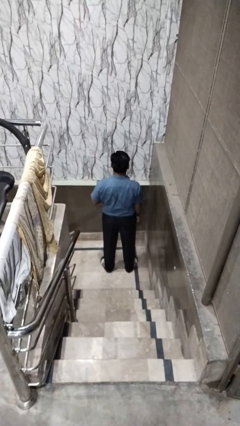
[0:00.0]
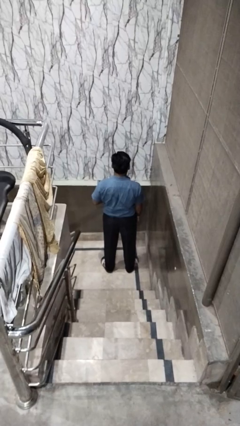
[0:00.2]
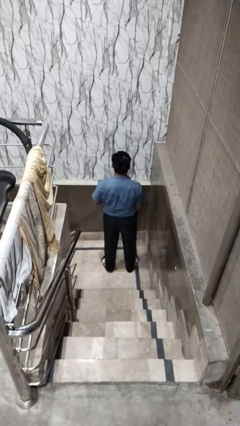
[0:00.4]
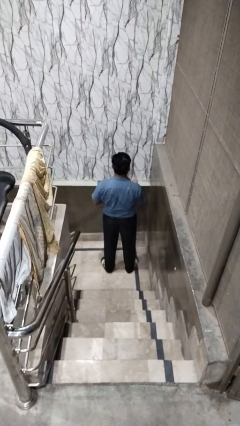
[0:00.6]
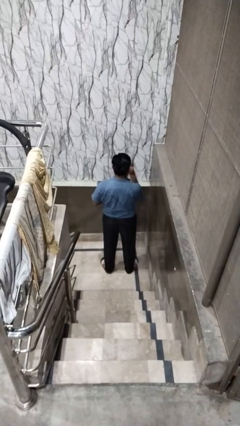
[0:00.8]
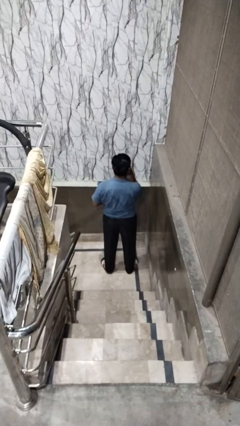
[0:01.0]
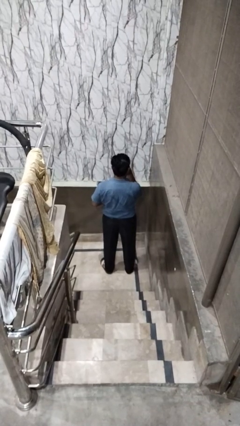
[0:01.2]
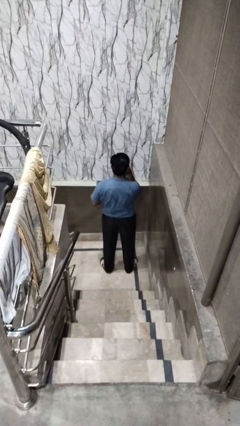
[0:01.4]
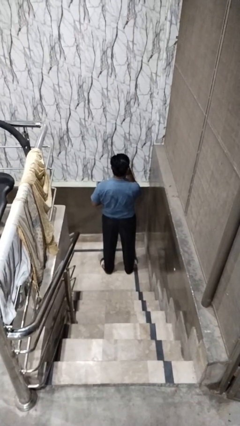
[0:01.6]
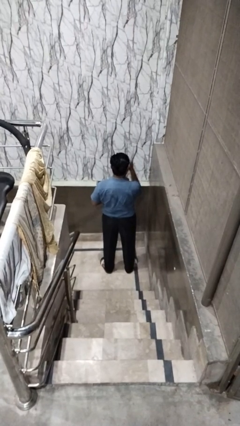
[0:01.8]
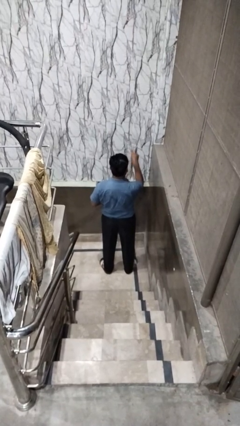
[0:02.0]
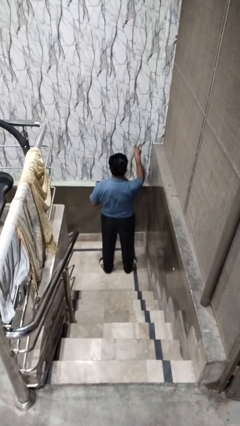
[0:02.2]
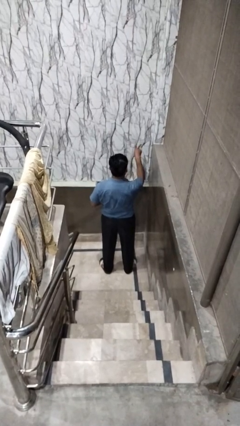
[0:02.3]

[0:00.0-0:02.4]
person gestures watch closely

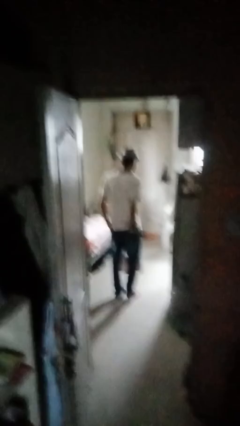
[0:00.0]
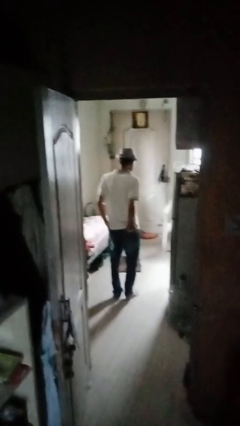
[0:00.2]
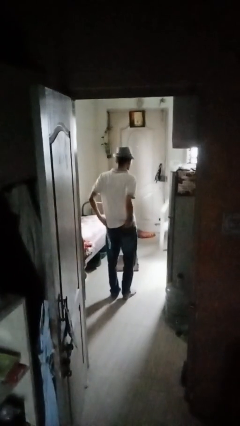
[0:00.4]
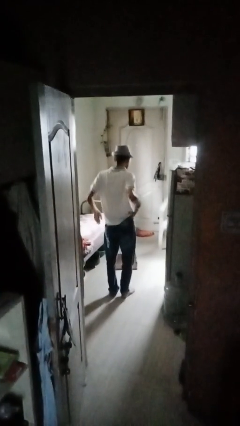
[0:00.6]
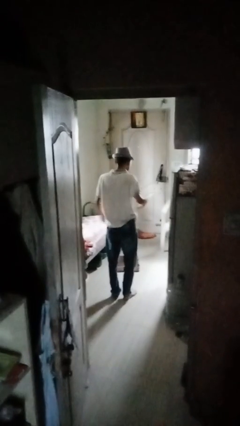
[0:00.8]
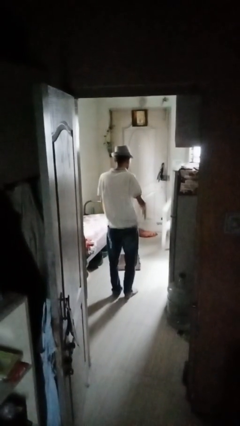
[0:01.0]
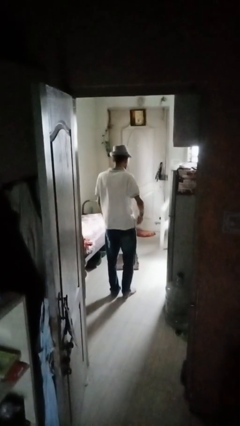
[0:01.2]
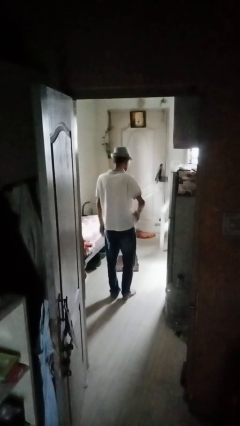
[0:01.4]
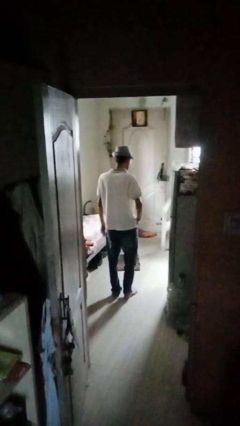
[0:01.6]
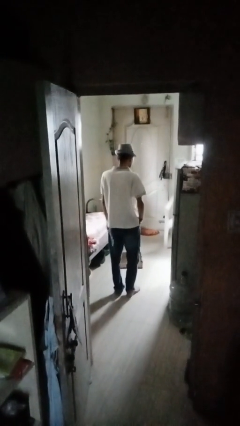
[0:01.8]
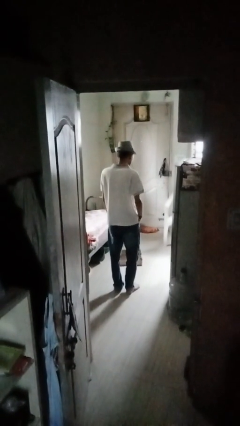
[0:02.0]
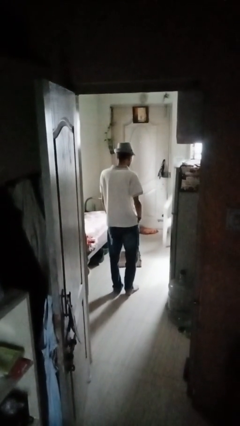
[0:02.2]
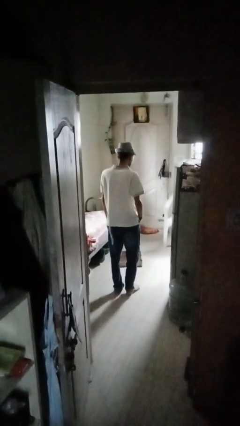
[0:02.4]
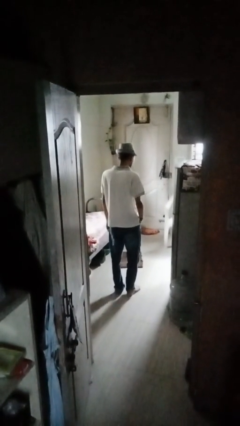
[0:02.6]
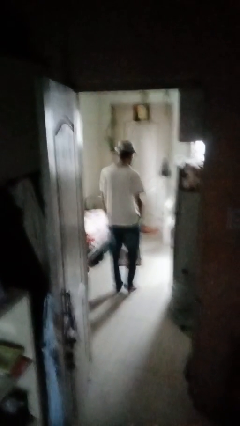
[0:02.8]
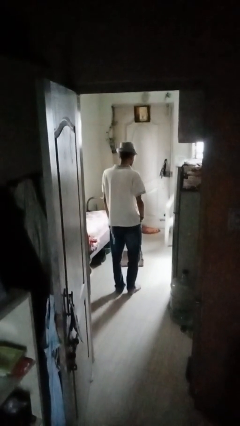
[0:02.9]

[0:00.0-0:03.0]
person puts hands in back pockets

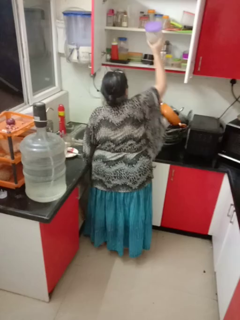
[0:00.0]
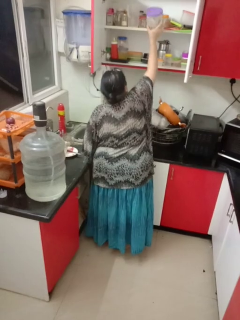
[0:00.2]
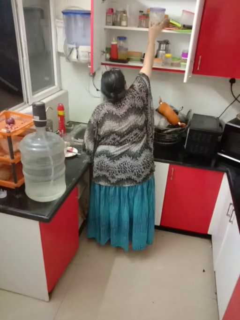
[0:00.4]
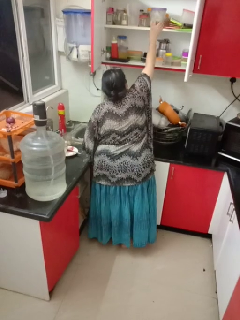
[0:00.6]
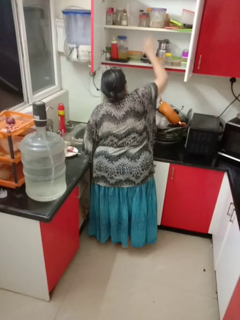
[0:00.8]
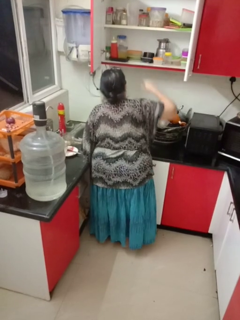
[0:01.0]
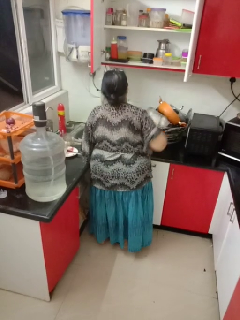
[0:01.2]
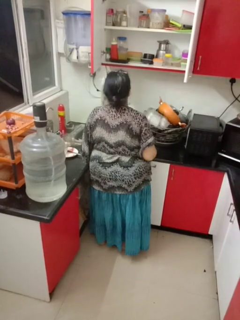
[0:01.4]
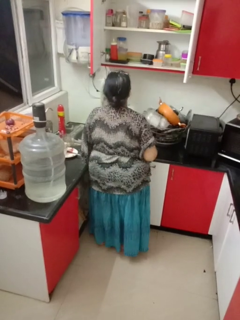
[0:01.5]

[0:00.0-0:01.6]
person puts object in cabinet

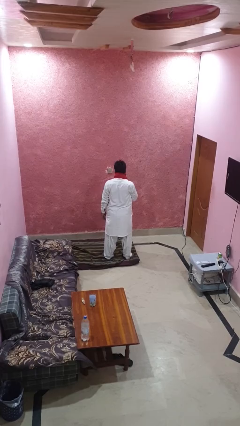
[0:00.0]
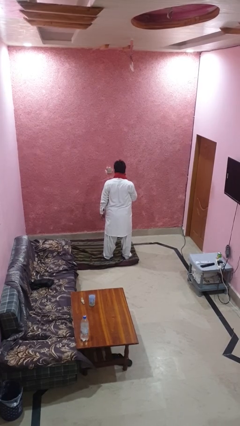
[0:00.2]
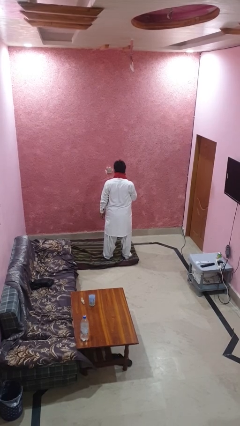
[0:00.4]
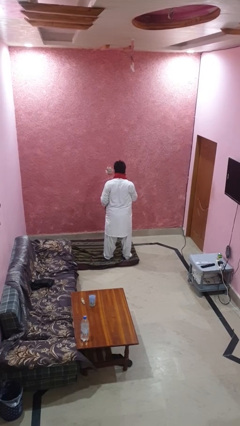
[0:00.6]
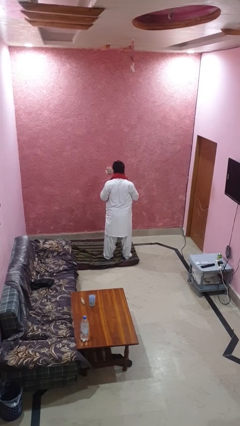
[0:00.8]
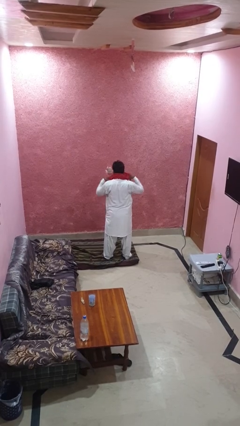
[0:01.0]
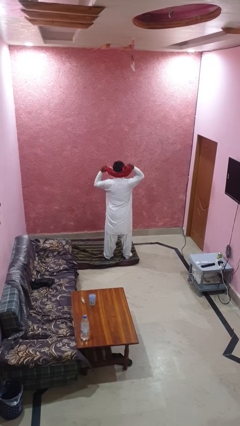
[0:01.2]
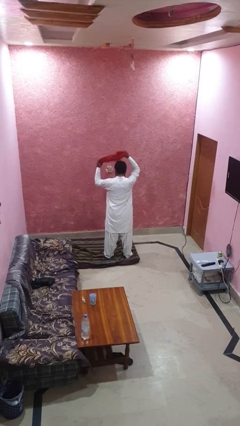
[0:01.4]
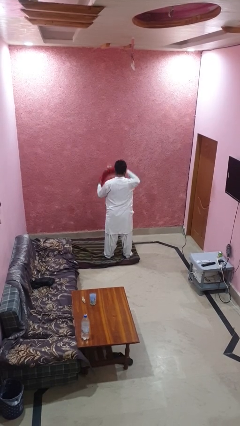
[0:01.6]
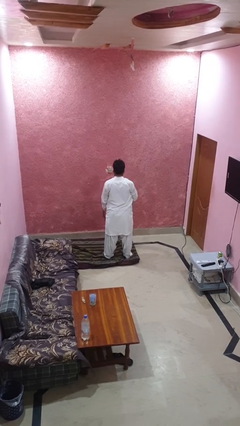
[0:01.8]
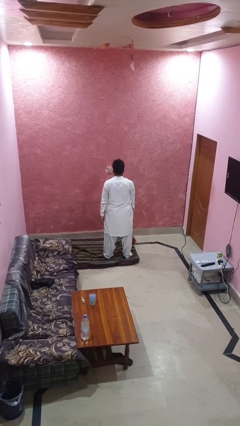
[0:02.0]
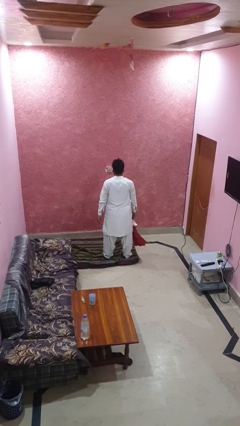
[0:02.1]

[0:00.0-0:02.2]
person takes off scarf

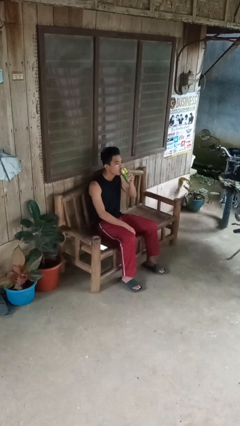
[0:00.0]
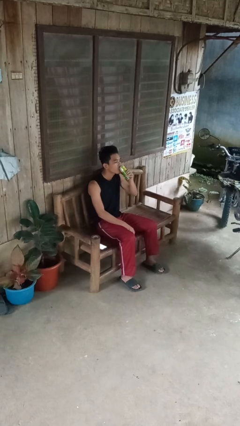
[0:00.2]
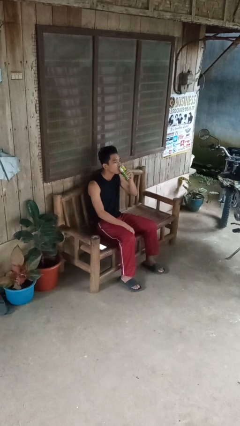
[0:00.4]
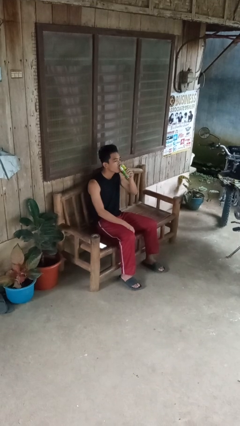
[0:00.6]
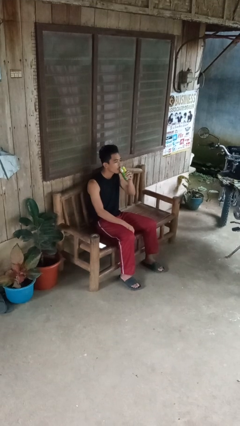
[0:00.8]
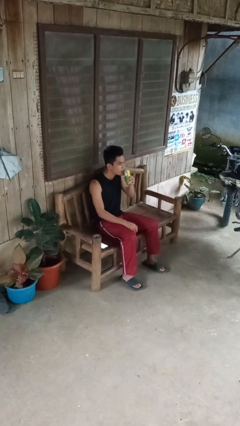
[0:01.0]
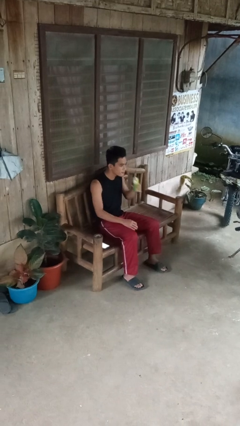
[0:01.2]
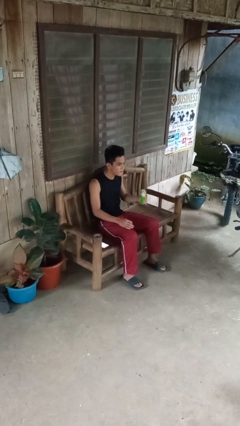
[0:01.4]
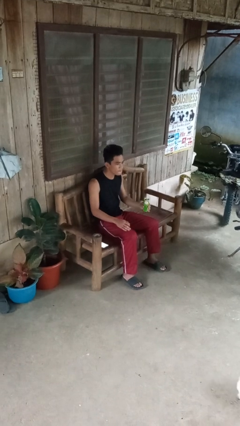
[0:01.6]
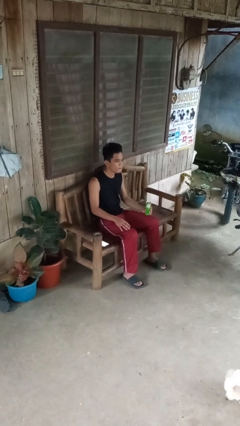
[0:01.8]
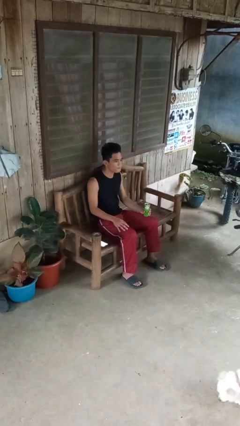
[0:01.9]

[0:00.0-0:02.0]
person drinks from beverage can

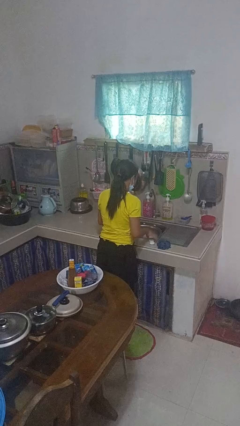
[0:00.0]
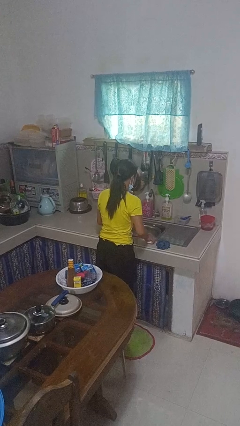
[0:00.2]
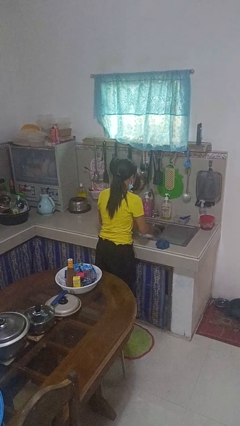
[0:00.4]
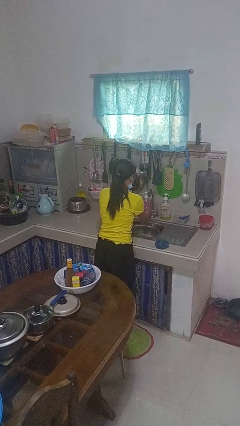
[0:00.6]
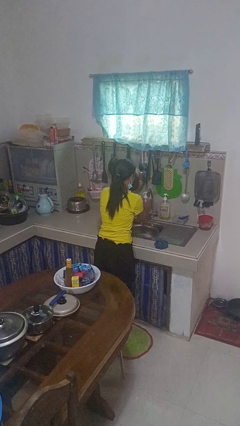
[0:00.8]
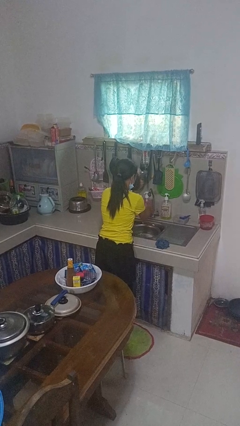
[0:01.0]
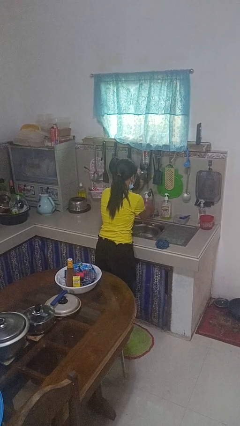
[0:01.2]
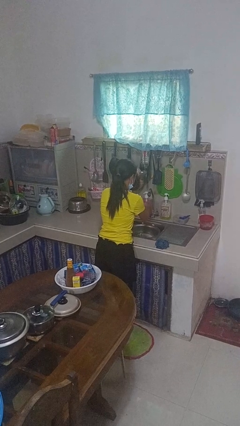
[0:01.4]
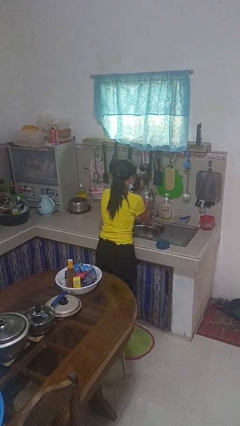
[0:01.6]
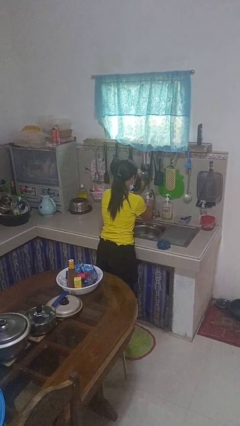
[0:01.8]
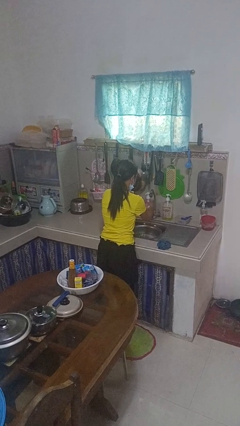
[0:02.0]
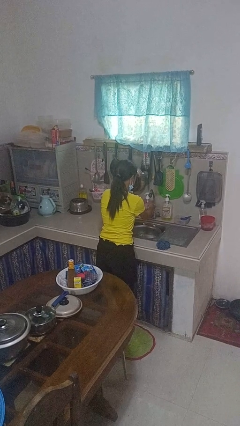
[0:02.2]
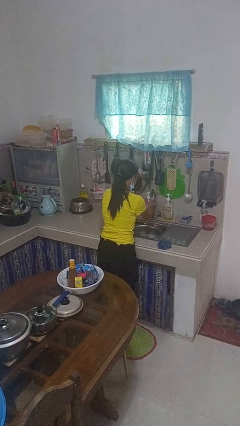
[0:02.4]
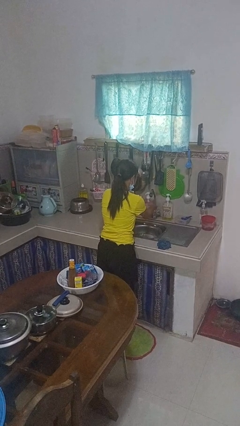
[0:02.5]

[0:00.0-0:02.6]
person washes hands

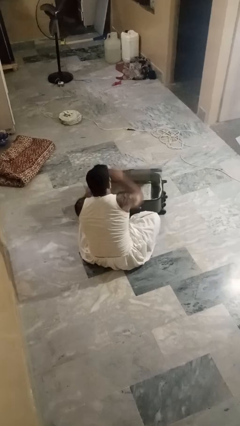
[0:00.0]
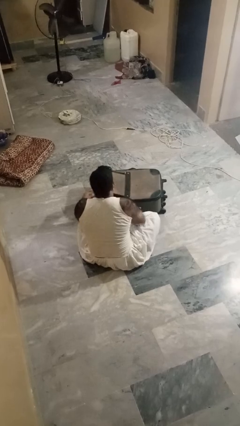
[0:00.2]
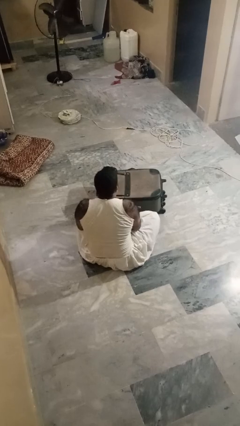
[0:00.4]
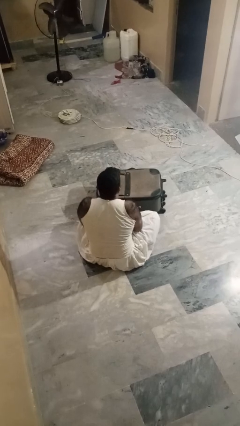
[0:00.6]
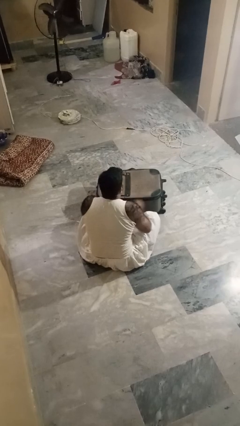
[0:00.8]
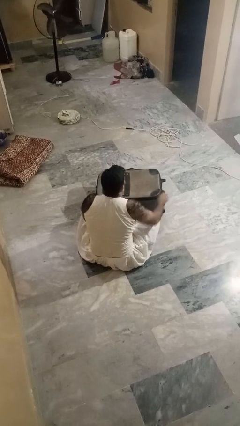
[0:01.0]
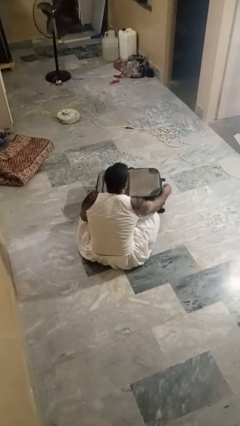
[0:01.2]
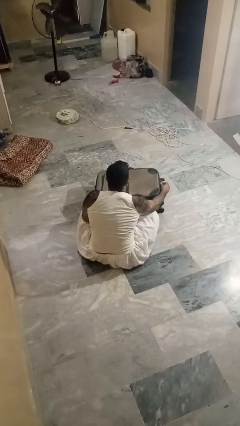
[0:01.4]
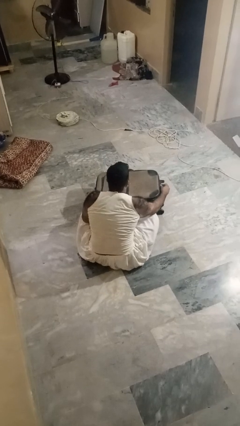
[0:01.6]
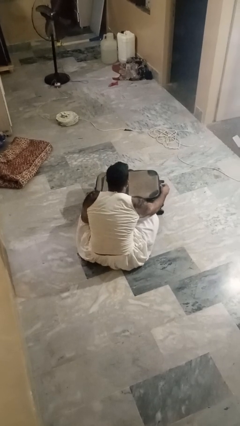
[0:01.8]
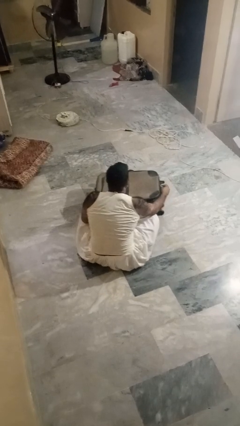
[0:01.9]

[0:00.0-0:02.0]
person closes suitcase

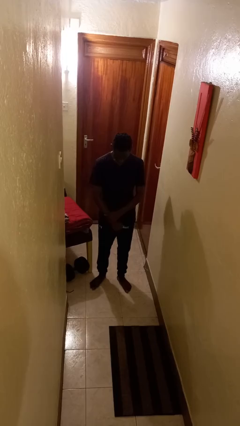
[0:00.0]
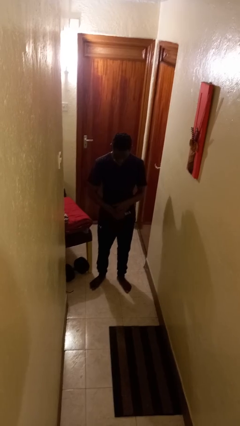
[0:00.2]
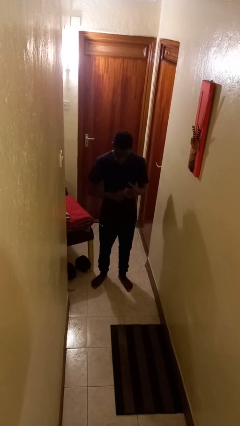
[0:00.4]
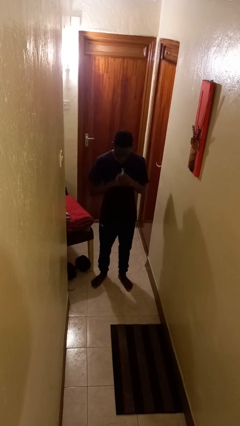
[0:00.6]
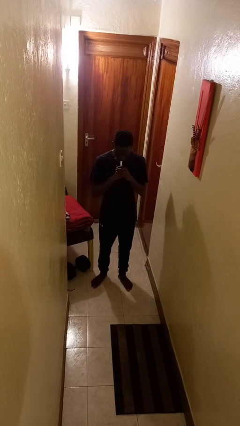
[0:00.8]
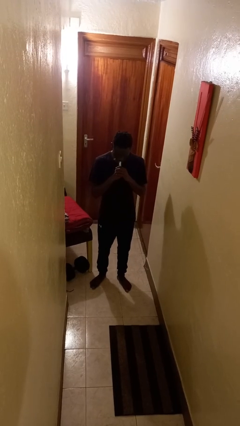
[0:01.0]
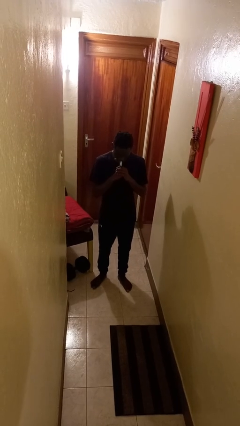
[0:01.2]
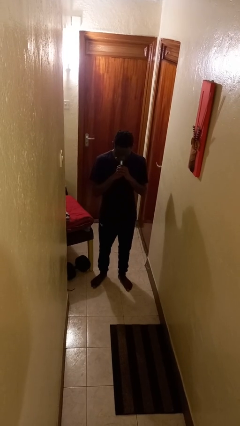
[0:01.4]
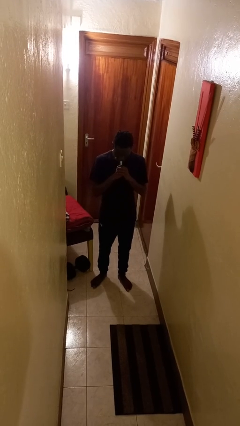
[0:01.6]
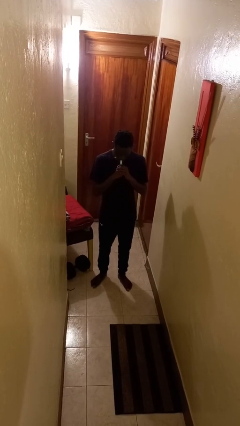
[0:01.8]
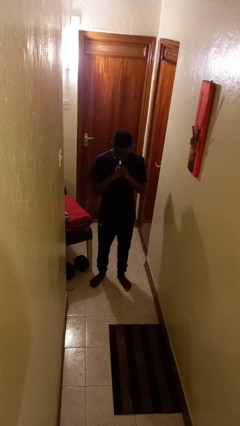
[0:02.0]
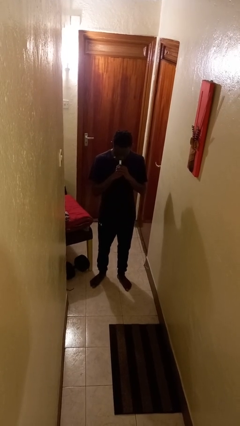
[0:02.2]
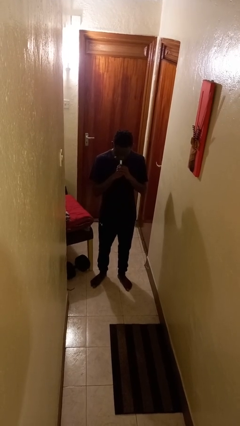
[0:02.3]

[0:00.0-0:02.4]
person vapes
